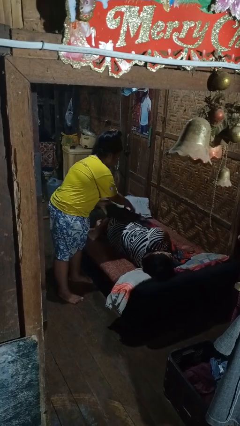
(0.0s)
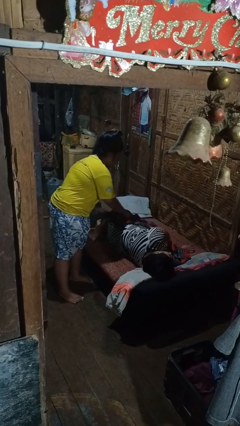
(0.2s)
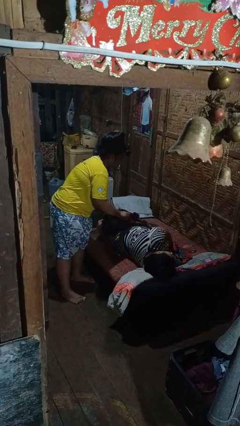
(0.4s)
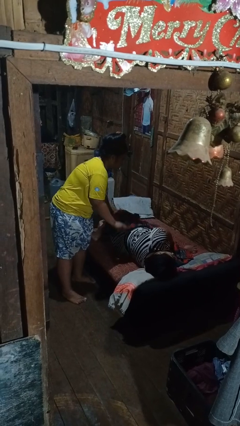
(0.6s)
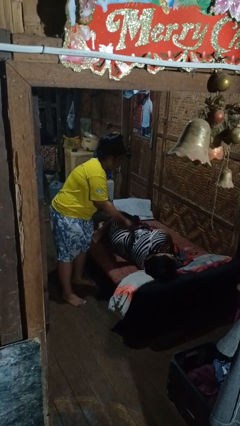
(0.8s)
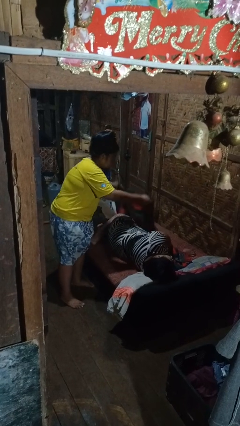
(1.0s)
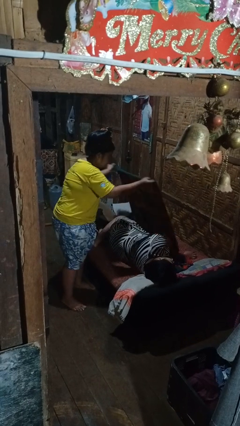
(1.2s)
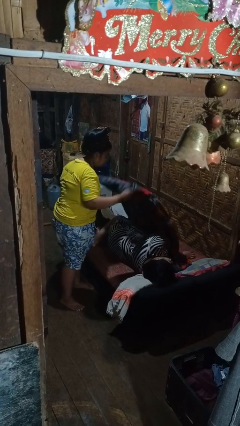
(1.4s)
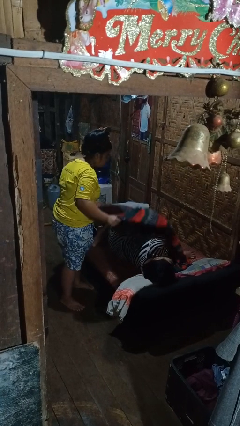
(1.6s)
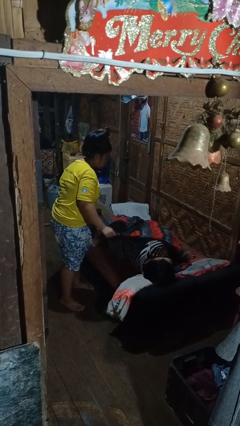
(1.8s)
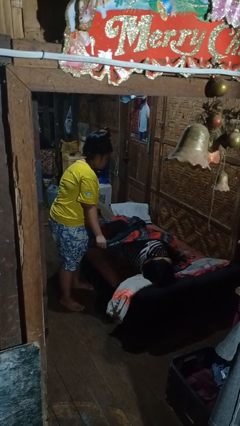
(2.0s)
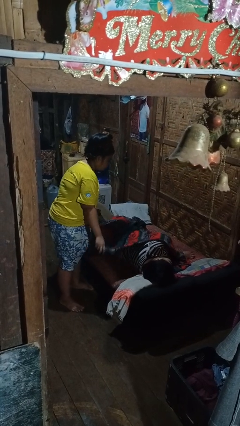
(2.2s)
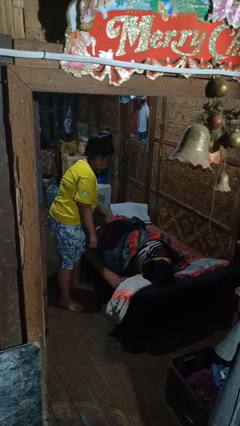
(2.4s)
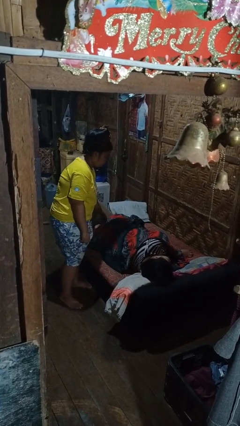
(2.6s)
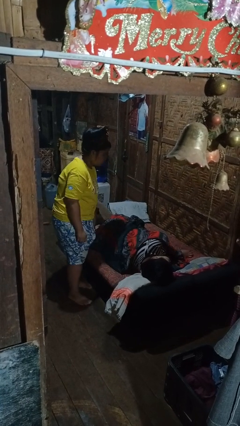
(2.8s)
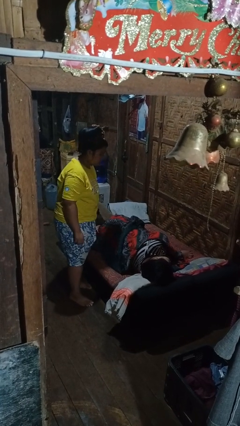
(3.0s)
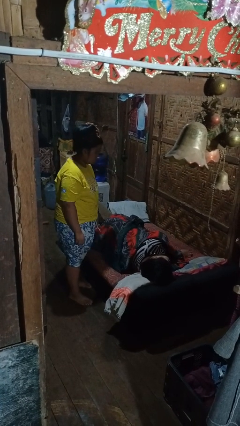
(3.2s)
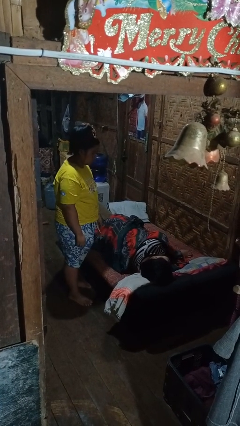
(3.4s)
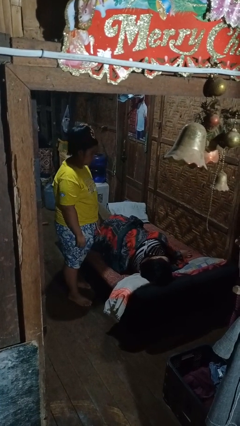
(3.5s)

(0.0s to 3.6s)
person covers friend with blanket

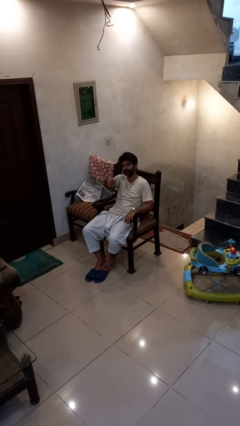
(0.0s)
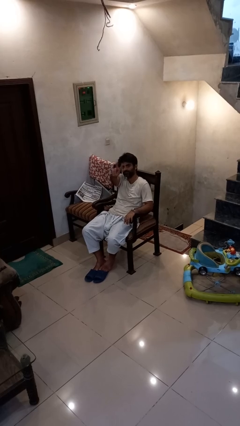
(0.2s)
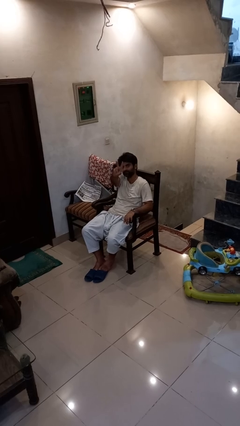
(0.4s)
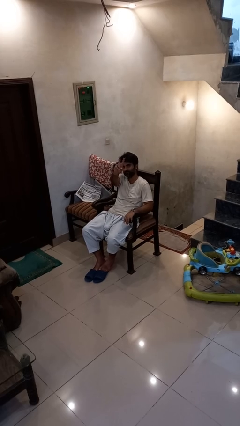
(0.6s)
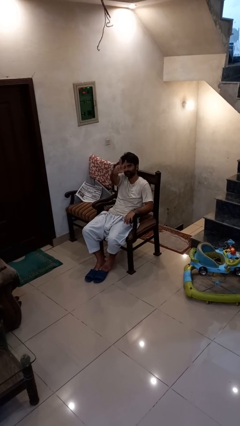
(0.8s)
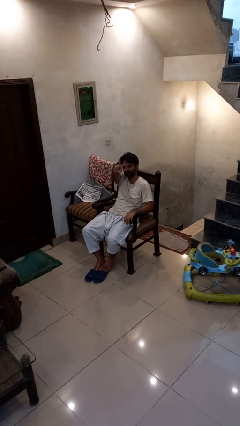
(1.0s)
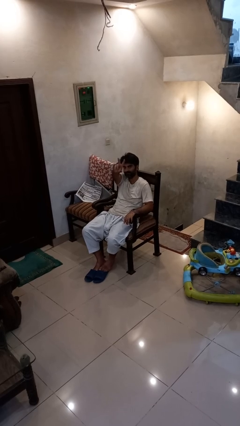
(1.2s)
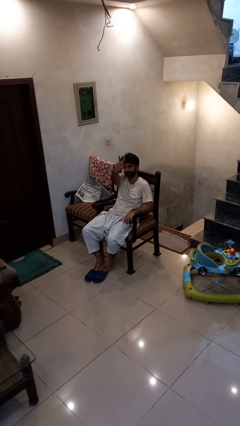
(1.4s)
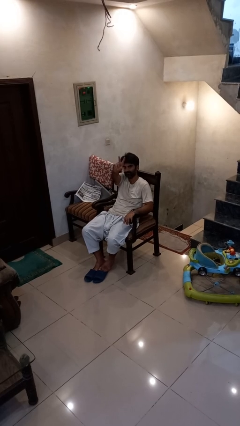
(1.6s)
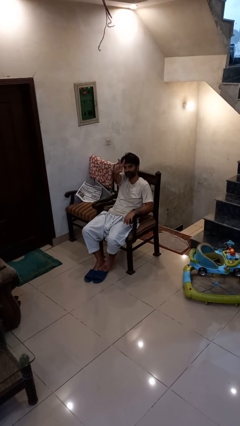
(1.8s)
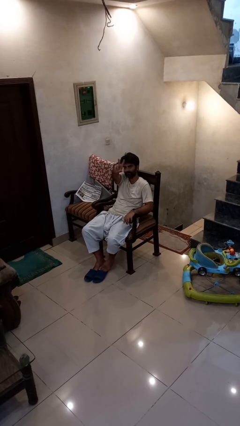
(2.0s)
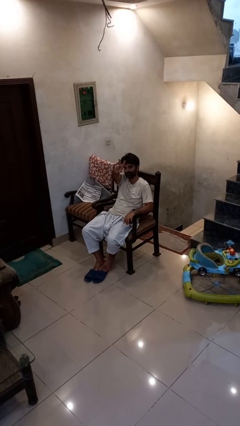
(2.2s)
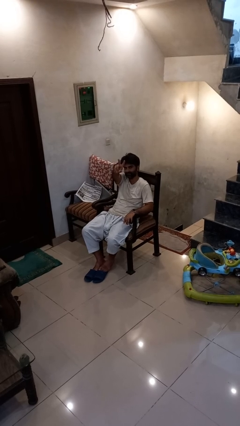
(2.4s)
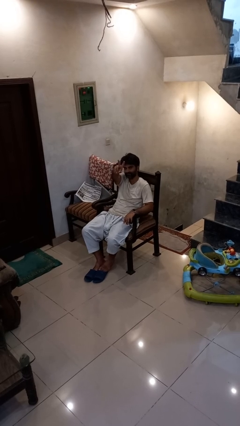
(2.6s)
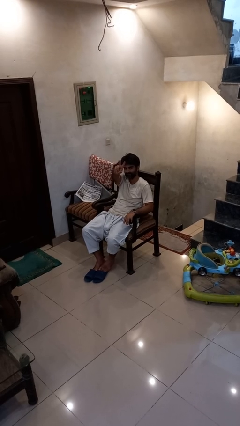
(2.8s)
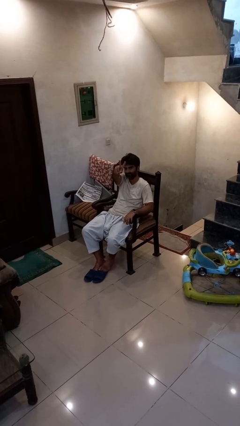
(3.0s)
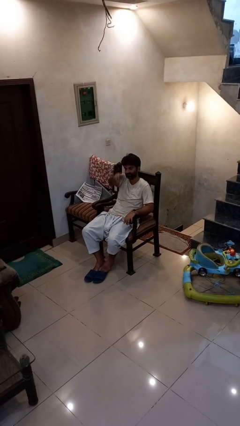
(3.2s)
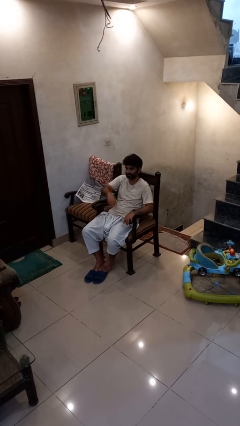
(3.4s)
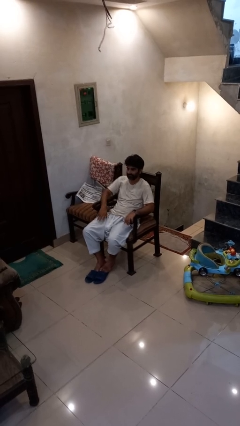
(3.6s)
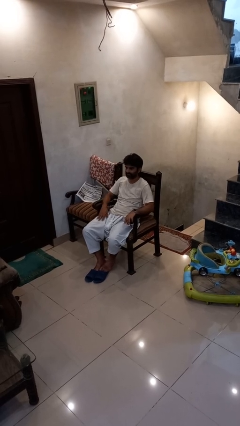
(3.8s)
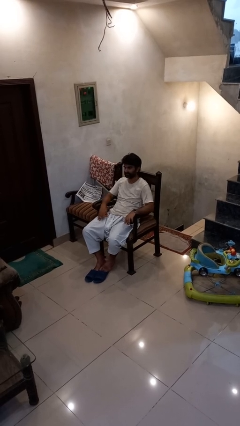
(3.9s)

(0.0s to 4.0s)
person gestures peace

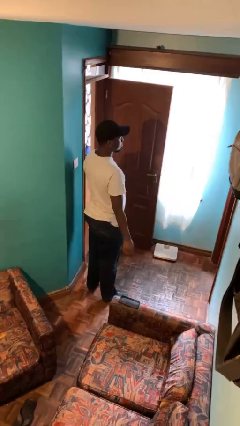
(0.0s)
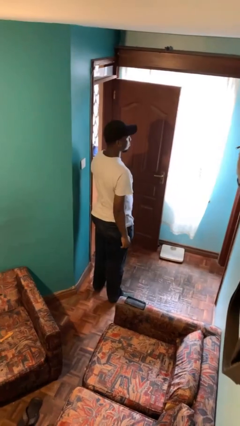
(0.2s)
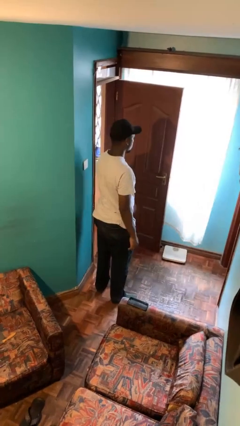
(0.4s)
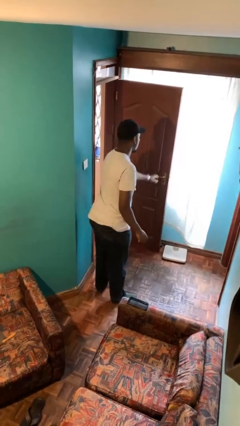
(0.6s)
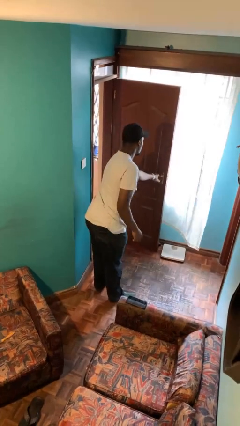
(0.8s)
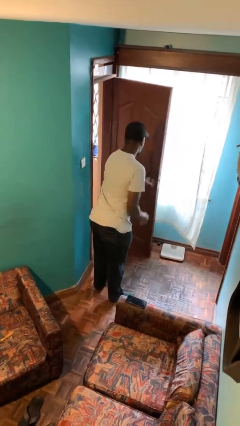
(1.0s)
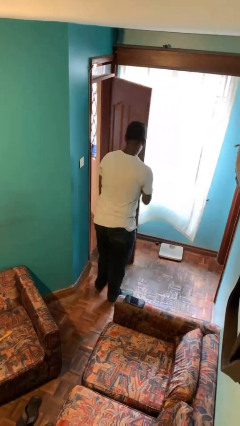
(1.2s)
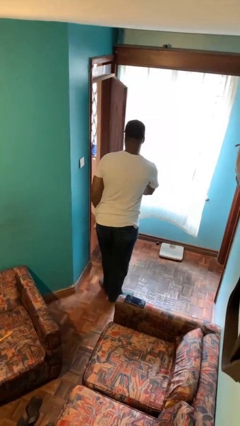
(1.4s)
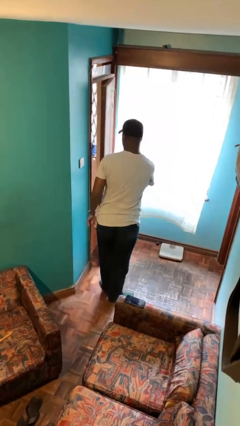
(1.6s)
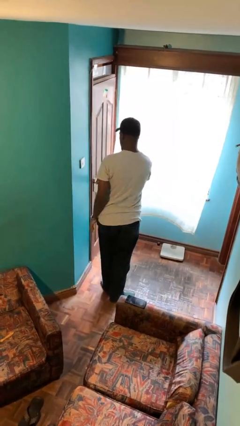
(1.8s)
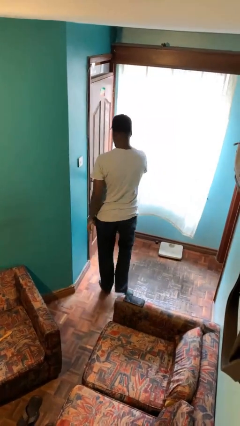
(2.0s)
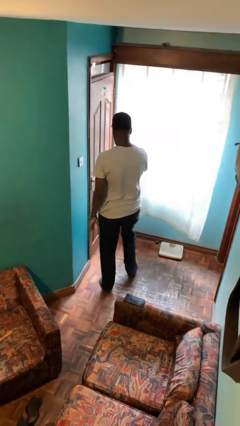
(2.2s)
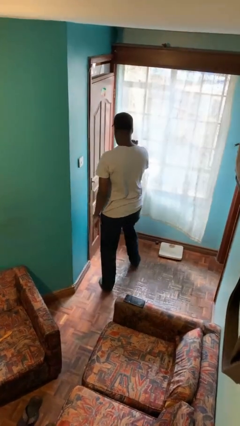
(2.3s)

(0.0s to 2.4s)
person closes facility door

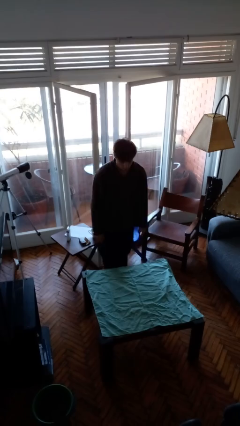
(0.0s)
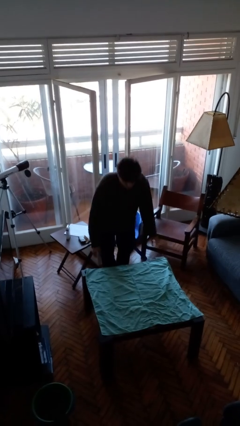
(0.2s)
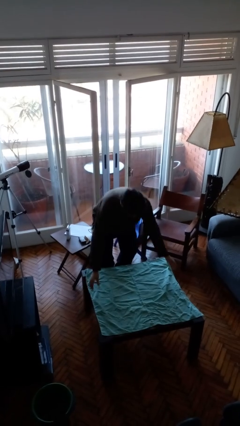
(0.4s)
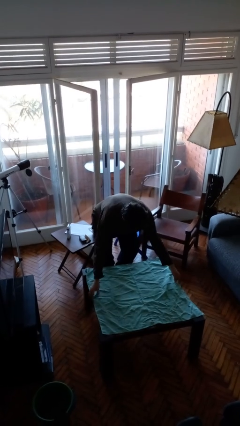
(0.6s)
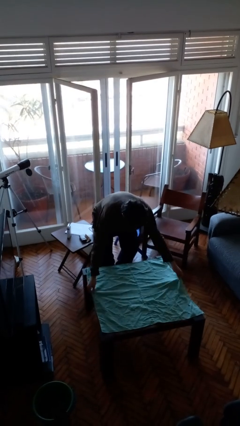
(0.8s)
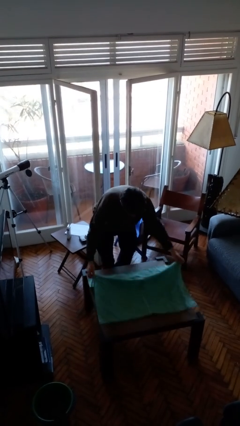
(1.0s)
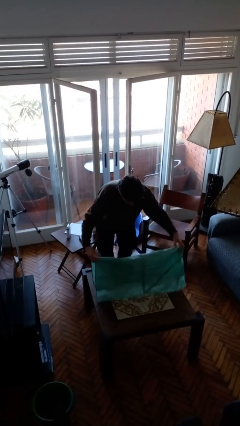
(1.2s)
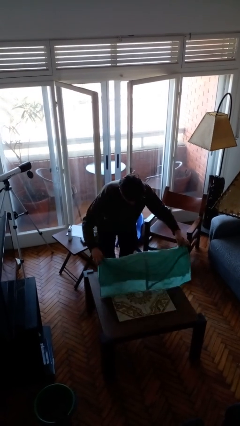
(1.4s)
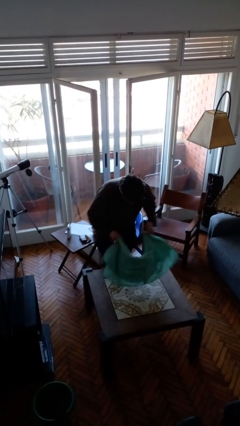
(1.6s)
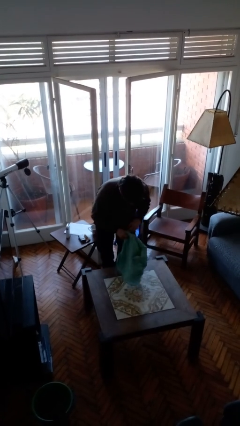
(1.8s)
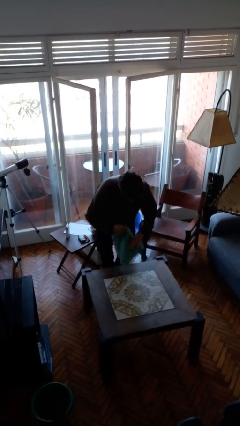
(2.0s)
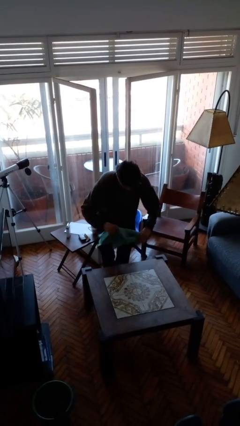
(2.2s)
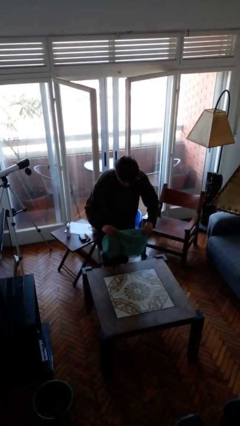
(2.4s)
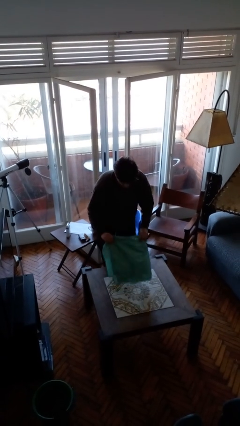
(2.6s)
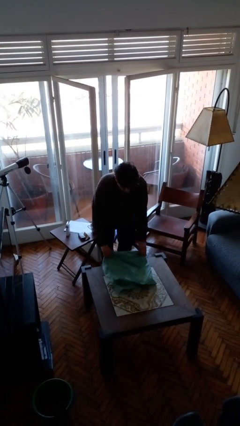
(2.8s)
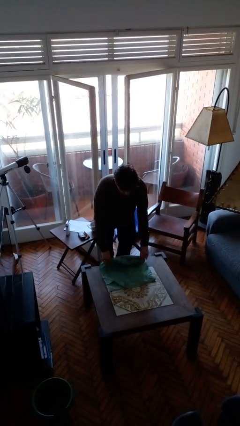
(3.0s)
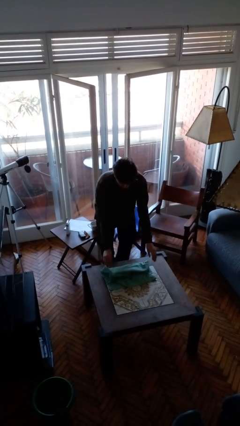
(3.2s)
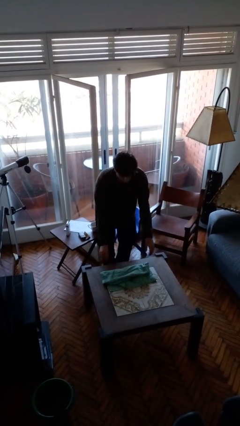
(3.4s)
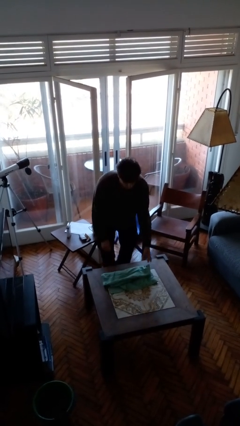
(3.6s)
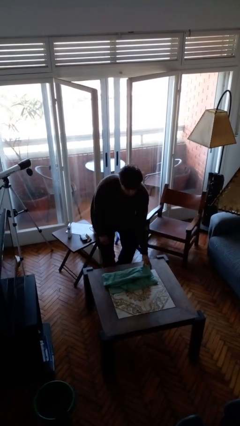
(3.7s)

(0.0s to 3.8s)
person folds tablecloth

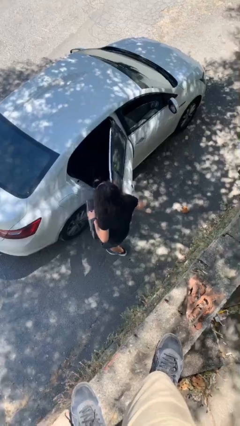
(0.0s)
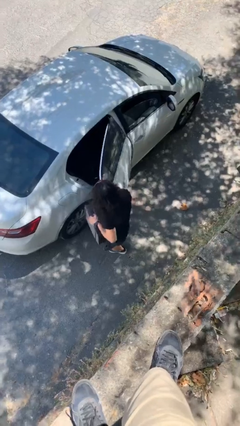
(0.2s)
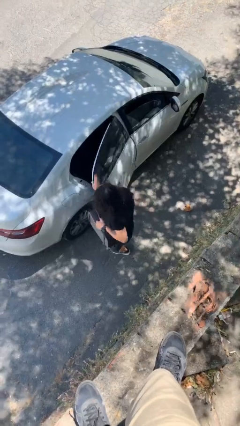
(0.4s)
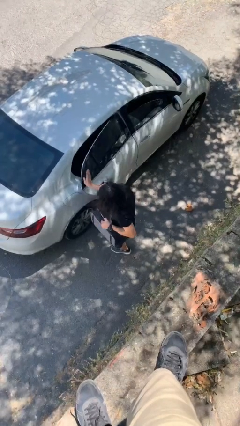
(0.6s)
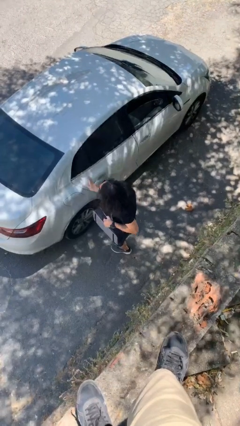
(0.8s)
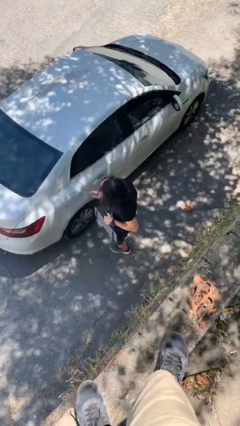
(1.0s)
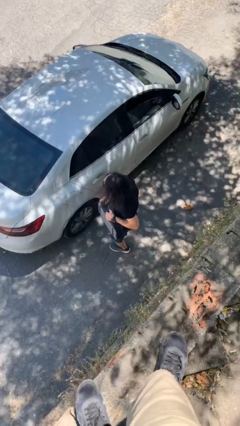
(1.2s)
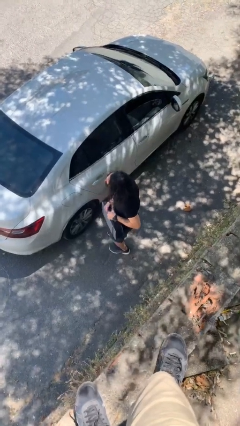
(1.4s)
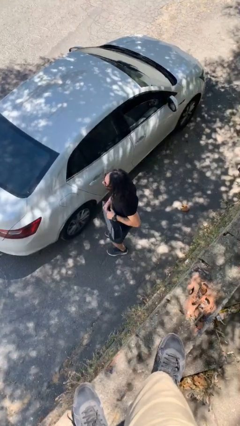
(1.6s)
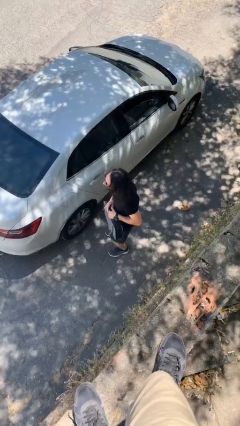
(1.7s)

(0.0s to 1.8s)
person closes car door

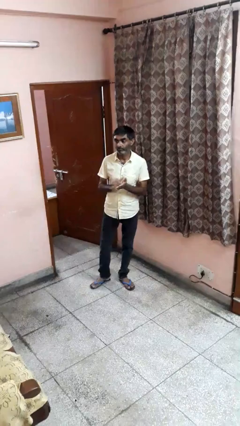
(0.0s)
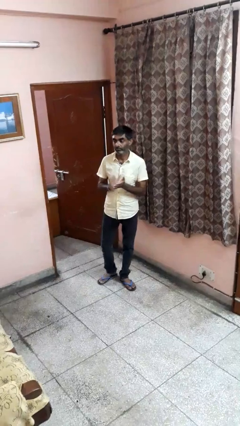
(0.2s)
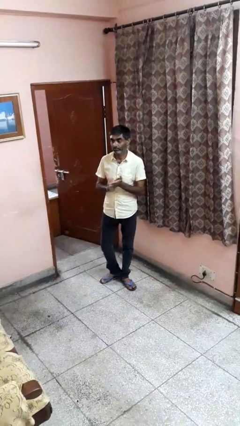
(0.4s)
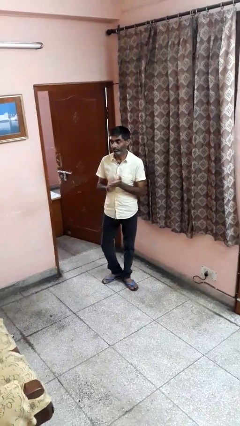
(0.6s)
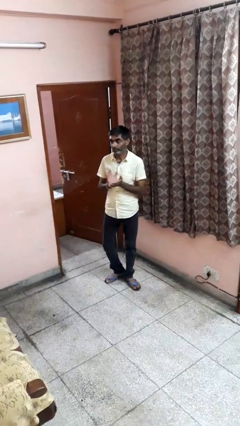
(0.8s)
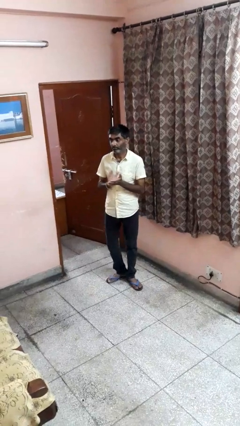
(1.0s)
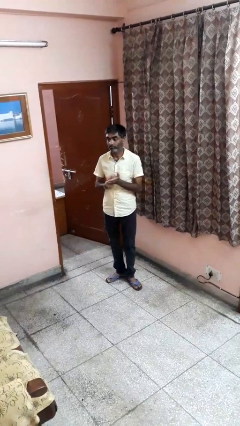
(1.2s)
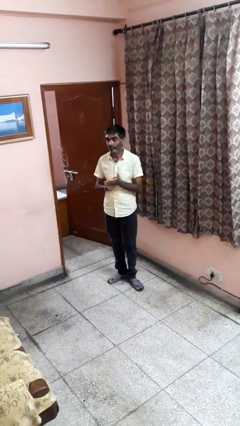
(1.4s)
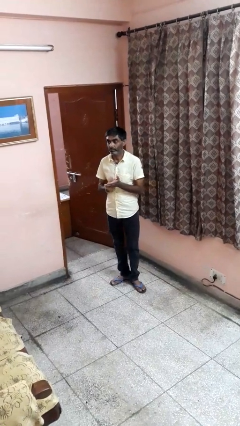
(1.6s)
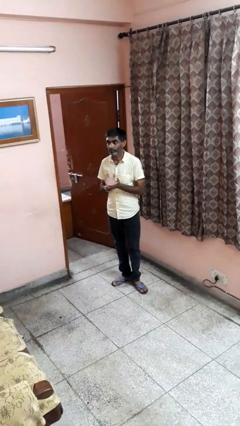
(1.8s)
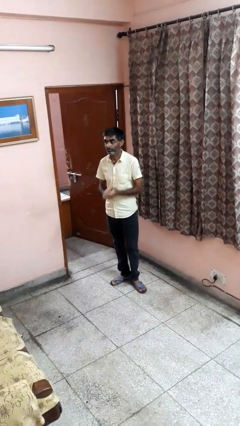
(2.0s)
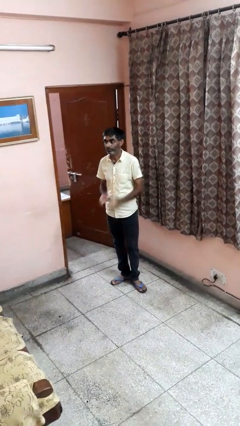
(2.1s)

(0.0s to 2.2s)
person claps hands
